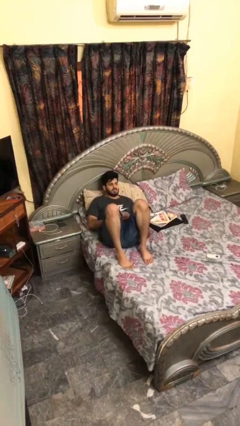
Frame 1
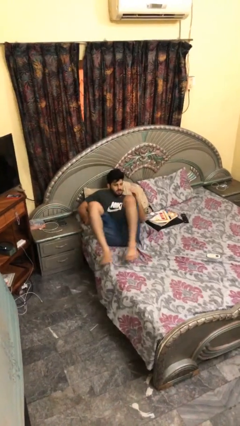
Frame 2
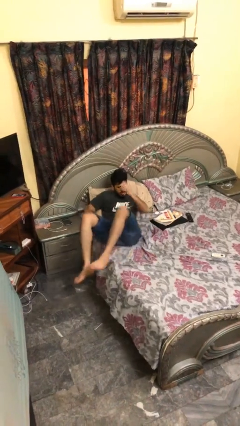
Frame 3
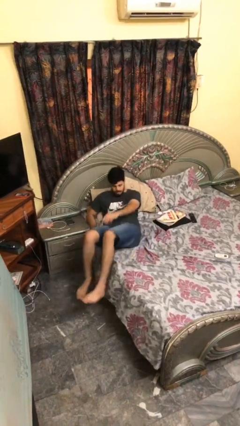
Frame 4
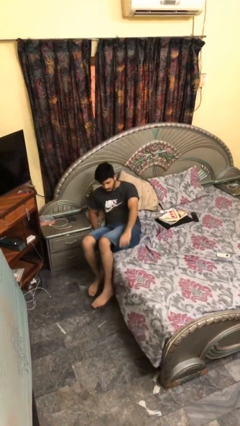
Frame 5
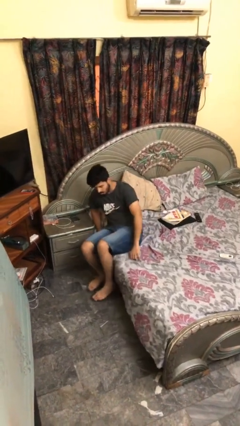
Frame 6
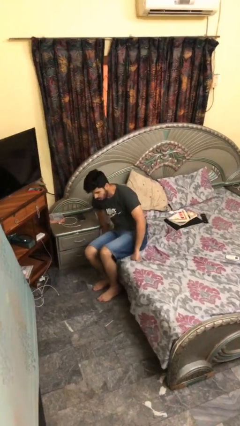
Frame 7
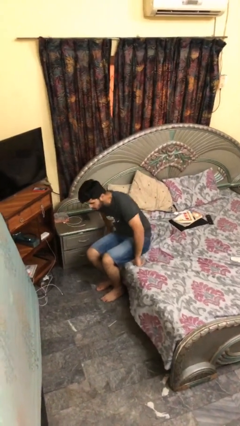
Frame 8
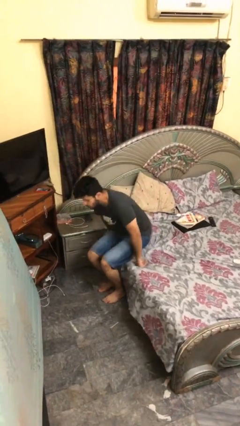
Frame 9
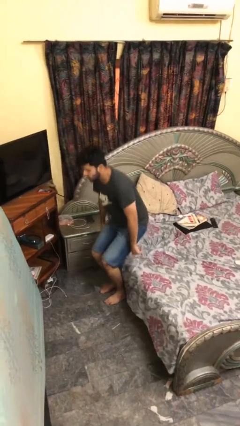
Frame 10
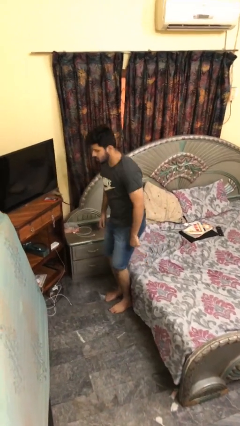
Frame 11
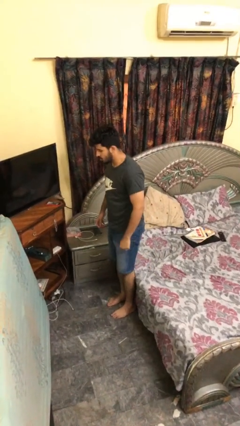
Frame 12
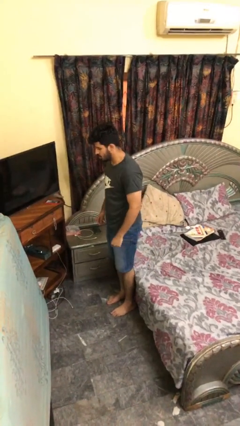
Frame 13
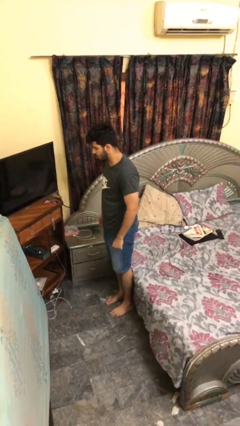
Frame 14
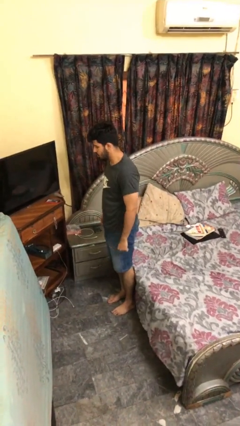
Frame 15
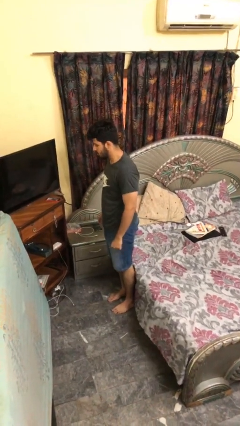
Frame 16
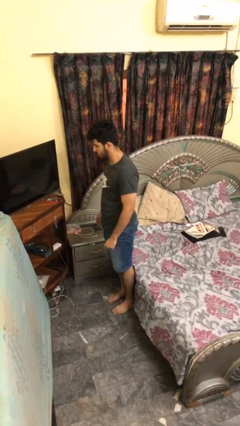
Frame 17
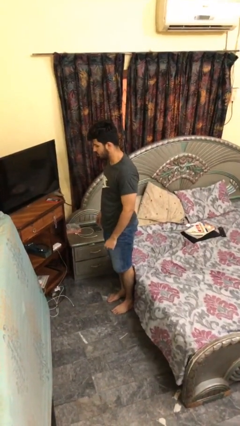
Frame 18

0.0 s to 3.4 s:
person stands up

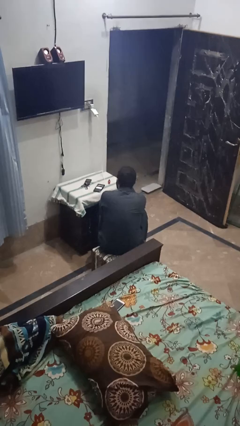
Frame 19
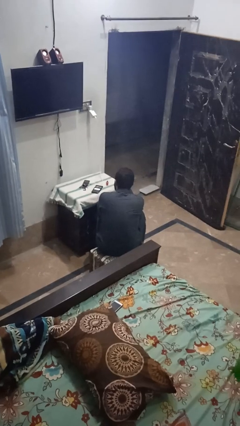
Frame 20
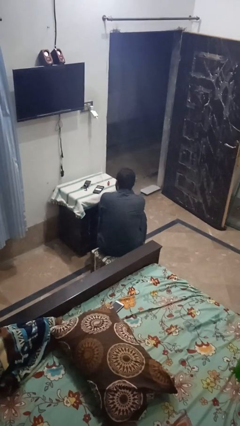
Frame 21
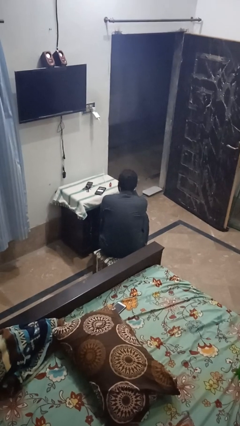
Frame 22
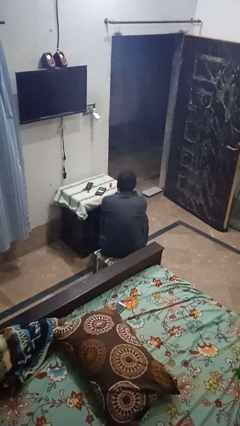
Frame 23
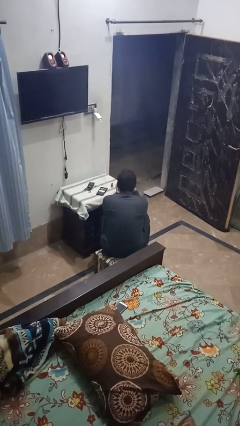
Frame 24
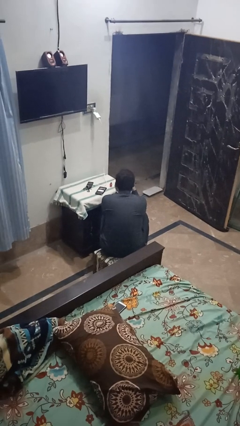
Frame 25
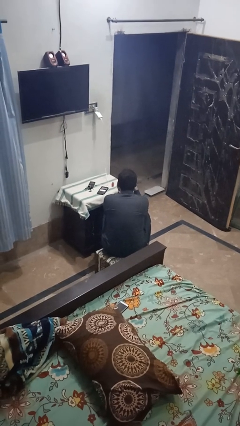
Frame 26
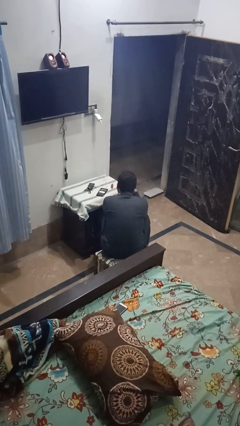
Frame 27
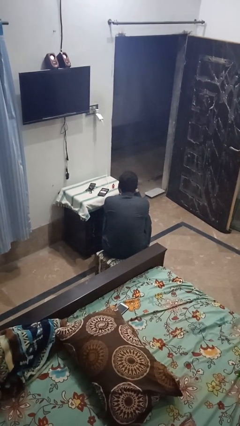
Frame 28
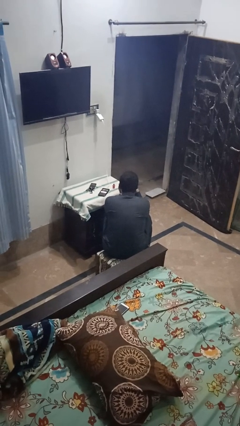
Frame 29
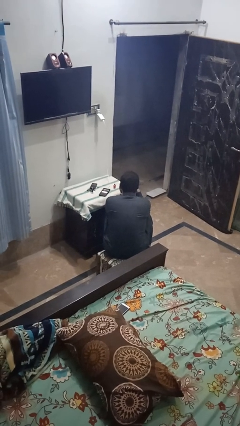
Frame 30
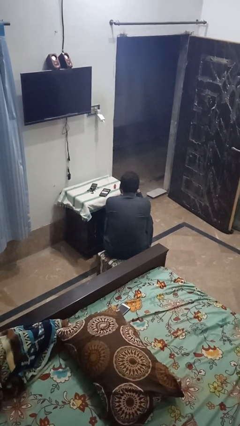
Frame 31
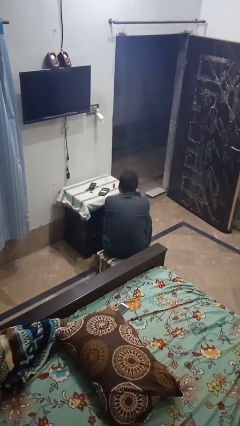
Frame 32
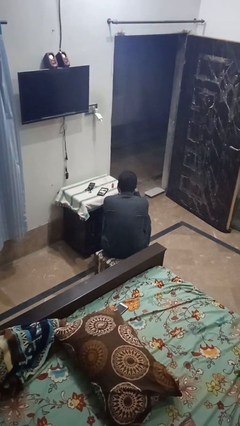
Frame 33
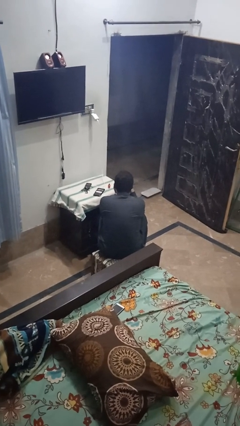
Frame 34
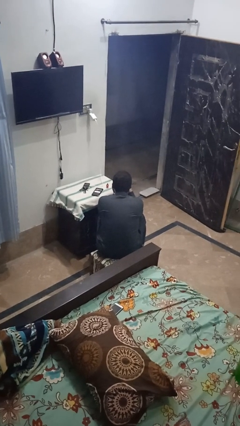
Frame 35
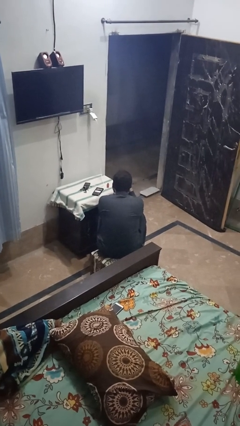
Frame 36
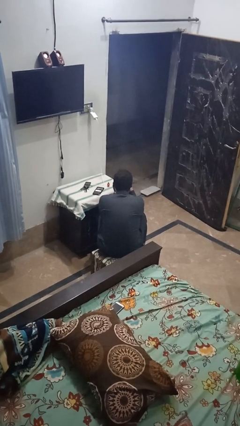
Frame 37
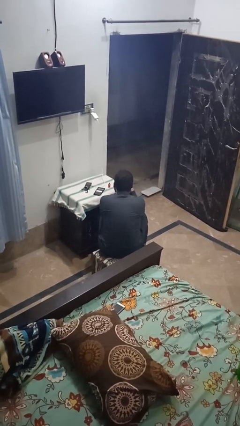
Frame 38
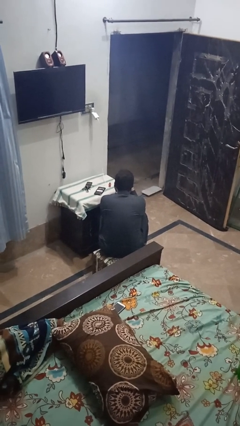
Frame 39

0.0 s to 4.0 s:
person paints fingernails

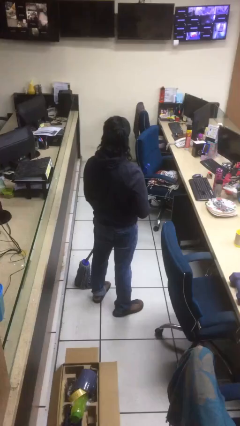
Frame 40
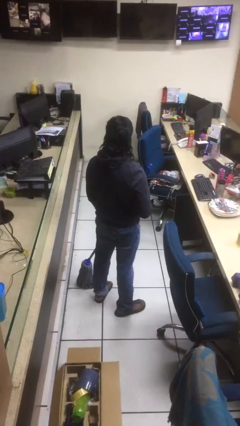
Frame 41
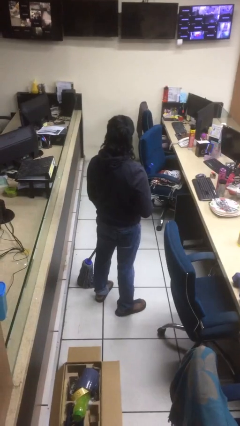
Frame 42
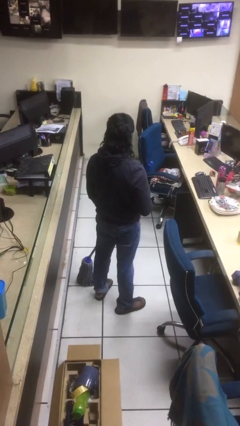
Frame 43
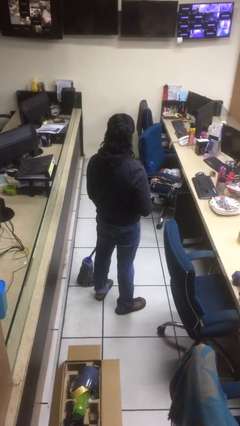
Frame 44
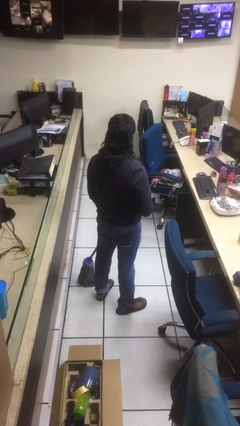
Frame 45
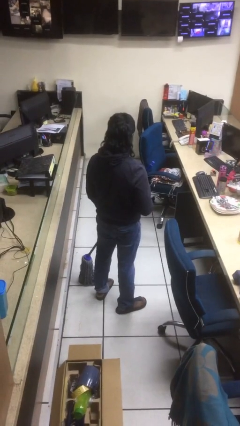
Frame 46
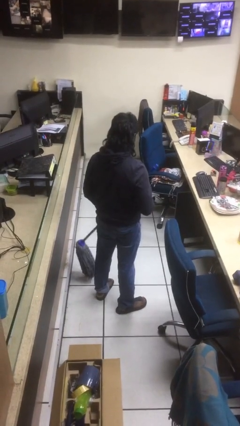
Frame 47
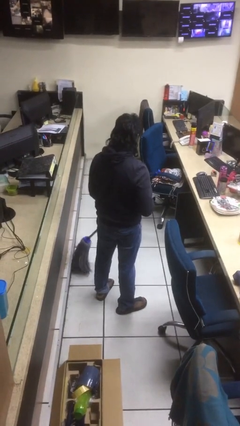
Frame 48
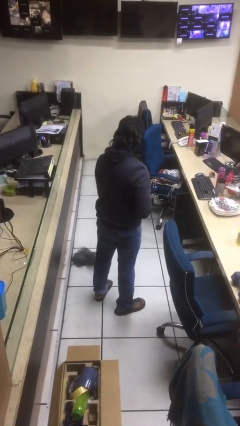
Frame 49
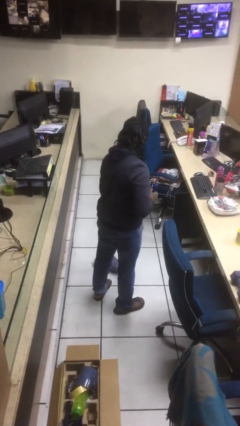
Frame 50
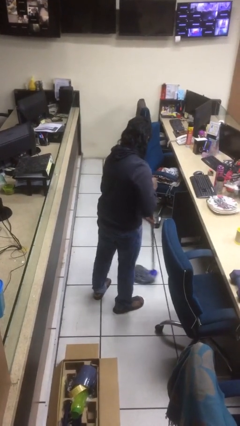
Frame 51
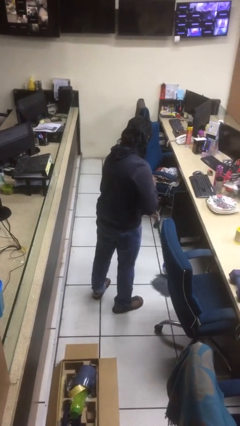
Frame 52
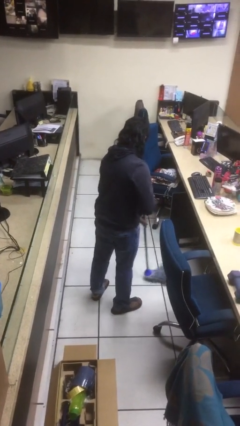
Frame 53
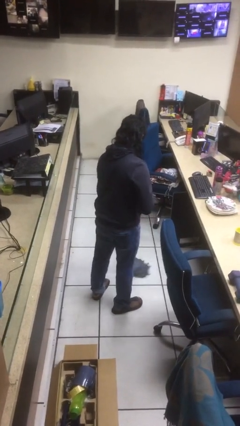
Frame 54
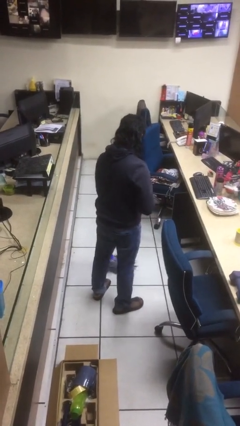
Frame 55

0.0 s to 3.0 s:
person mops

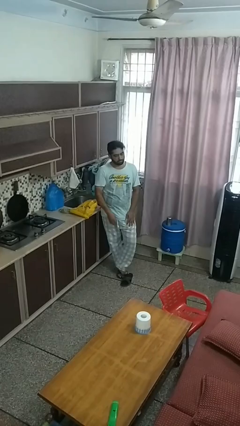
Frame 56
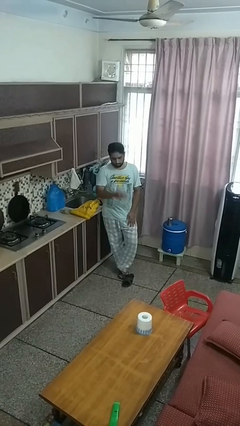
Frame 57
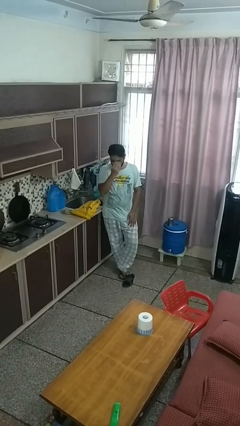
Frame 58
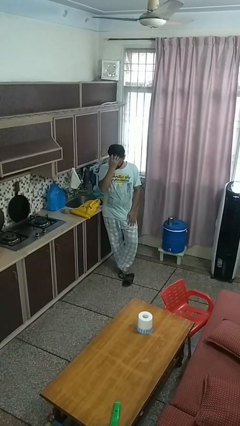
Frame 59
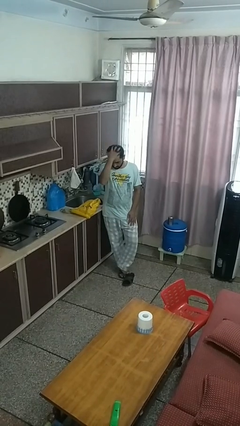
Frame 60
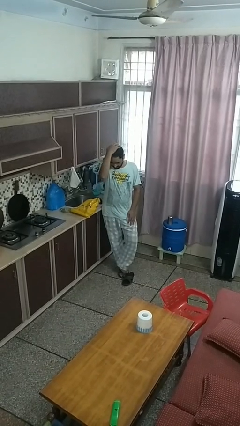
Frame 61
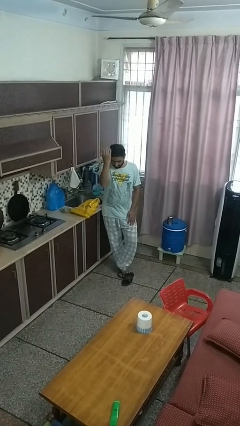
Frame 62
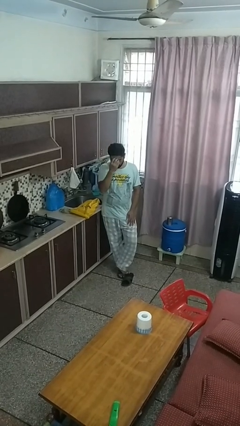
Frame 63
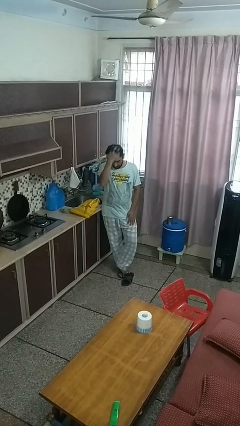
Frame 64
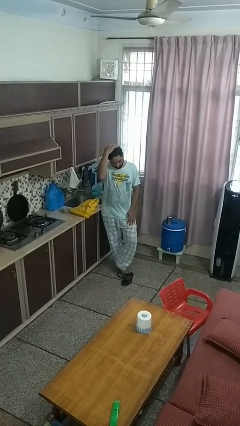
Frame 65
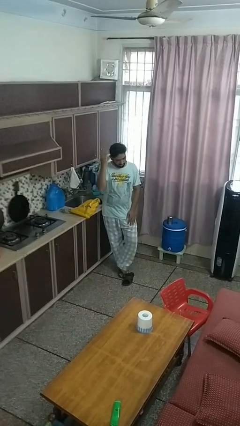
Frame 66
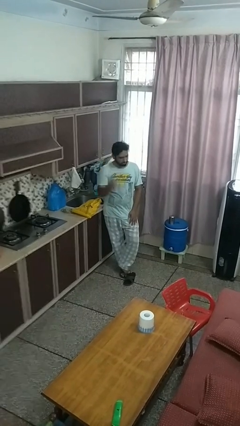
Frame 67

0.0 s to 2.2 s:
person strokes hair

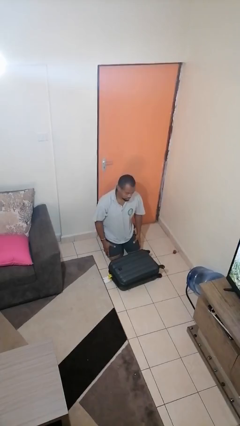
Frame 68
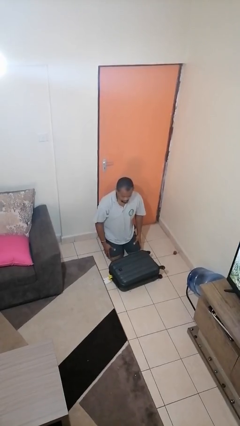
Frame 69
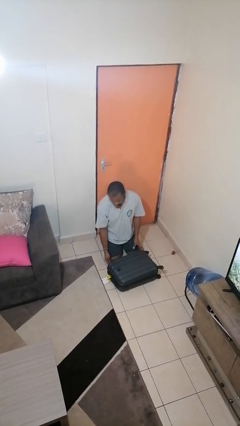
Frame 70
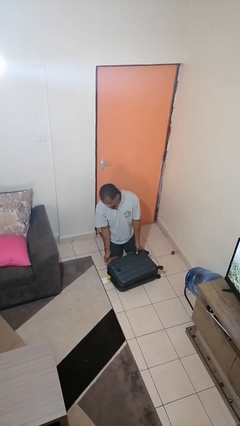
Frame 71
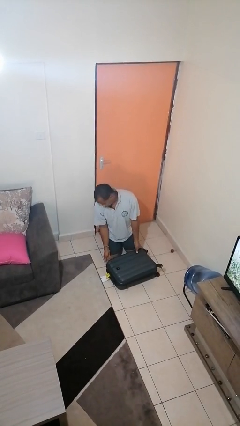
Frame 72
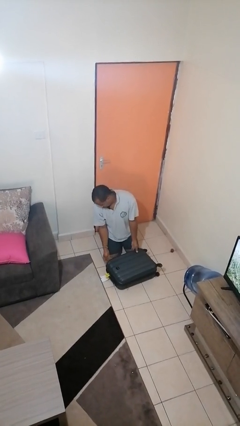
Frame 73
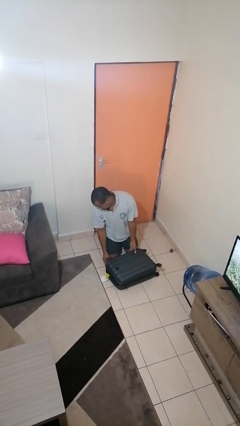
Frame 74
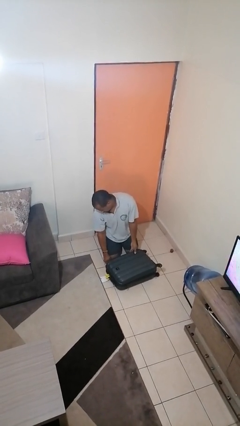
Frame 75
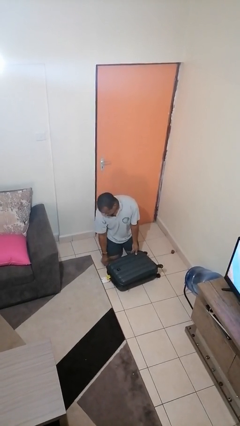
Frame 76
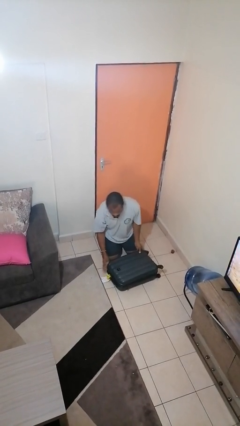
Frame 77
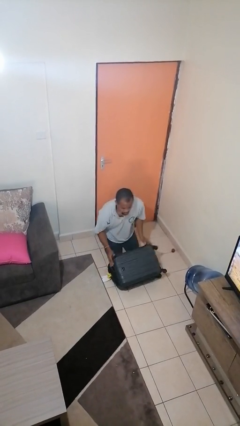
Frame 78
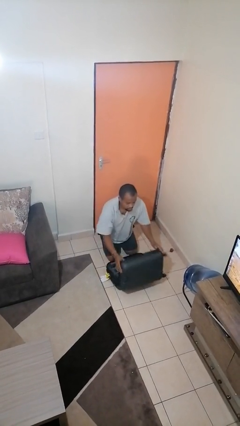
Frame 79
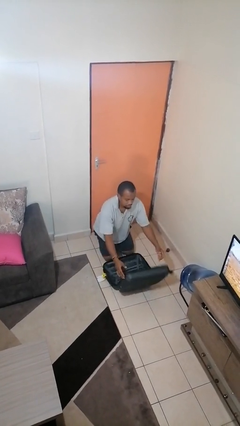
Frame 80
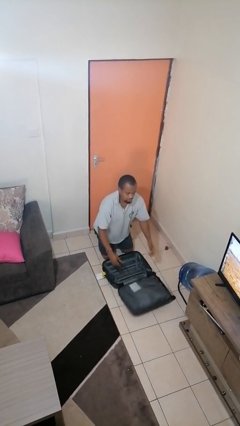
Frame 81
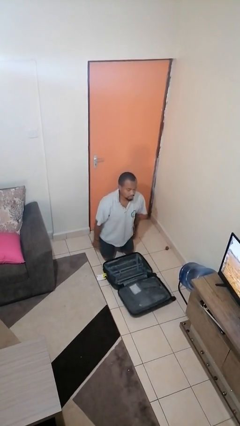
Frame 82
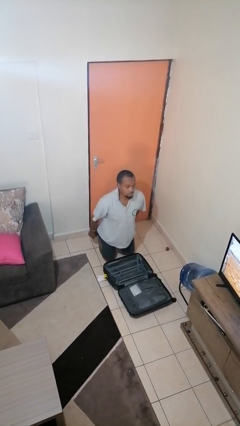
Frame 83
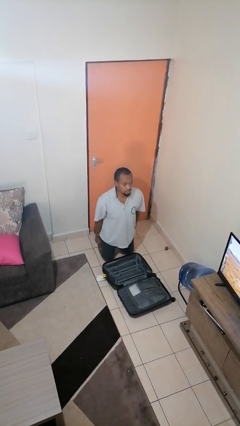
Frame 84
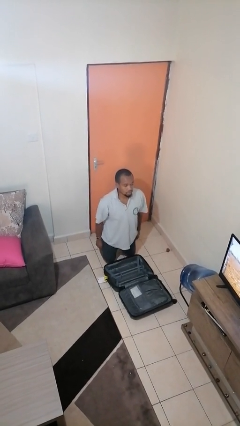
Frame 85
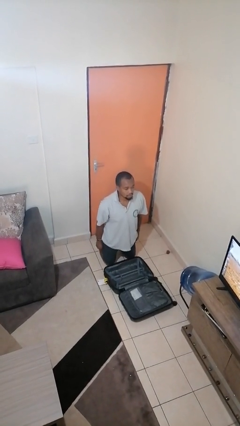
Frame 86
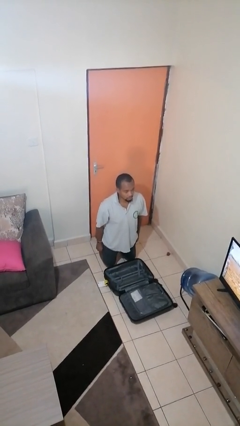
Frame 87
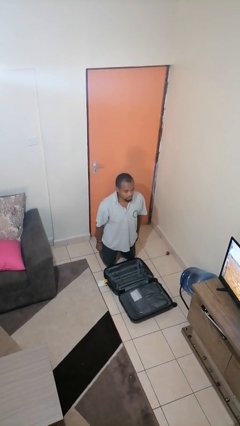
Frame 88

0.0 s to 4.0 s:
person opens suitcase

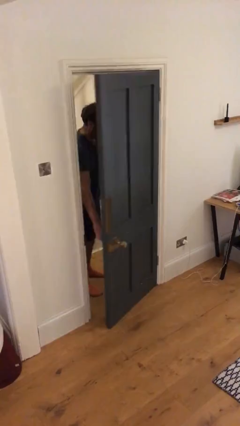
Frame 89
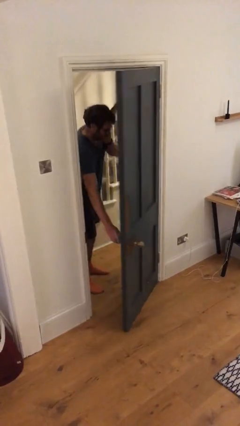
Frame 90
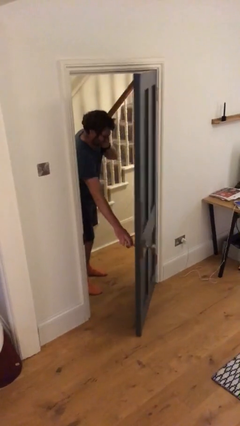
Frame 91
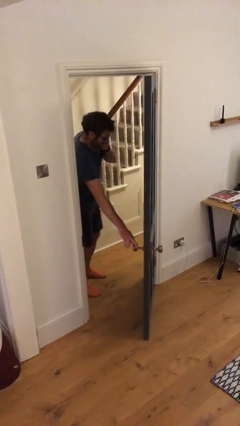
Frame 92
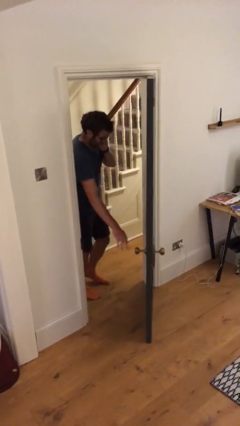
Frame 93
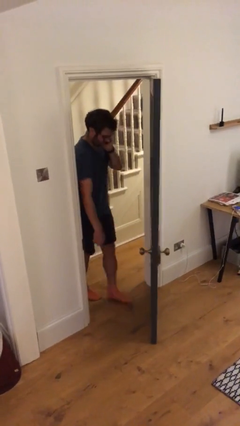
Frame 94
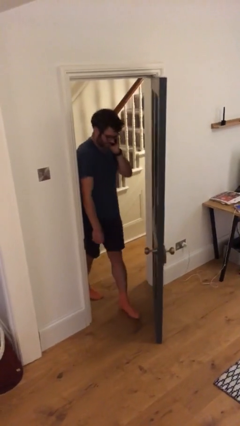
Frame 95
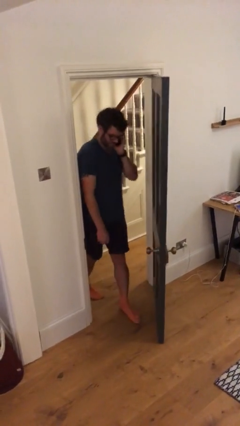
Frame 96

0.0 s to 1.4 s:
person opens facility door
